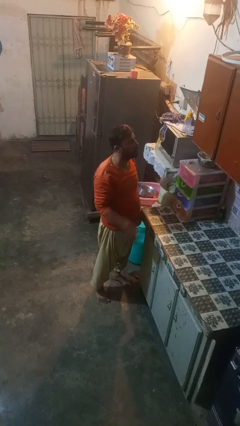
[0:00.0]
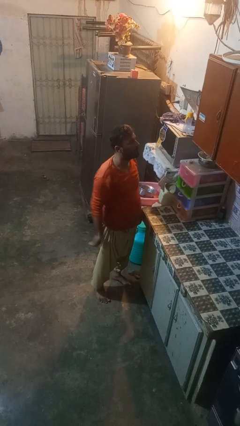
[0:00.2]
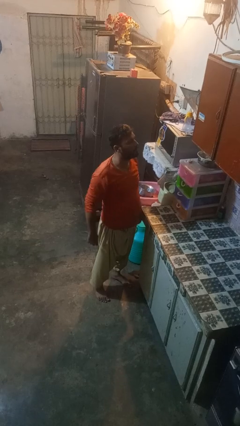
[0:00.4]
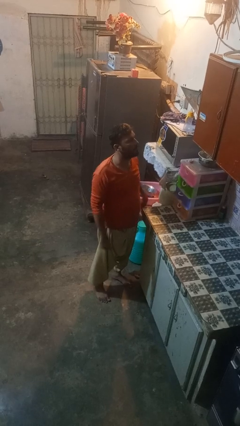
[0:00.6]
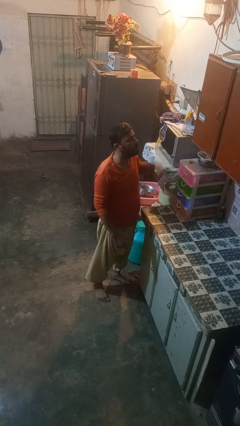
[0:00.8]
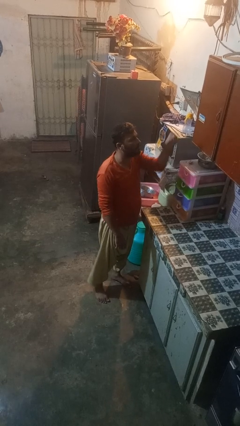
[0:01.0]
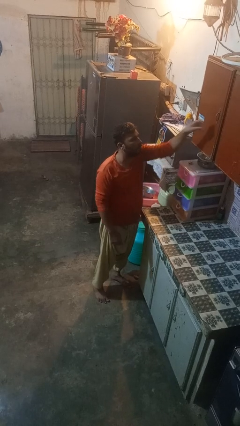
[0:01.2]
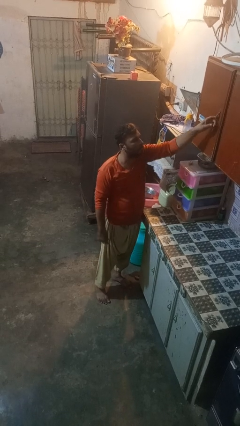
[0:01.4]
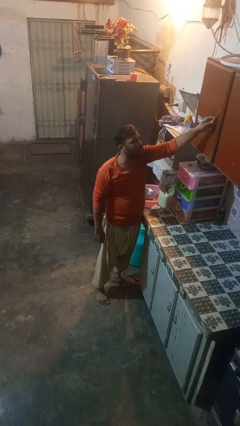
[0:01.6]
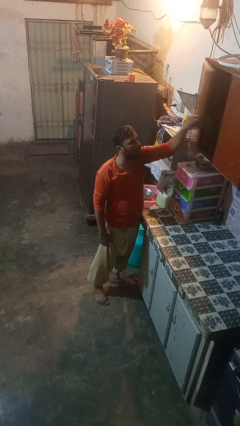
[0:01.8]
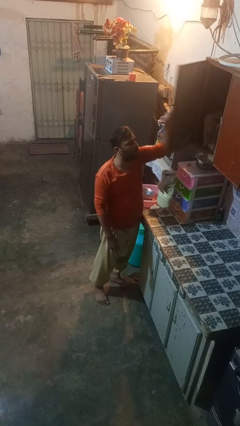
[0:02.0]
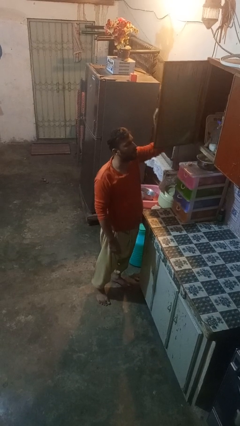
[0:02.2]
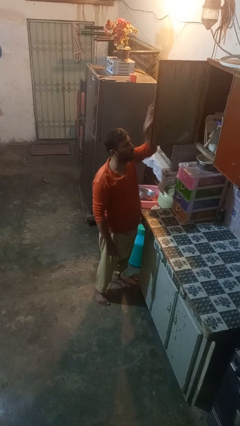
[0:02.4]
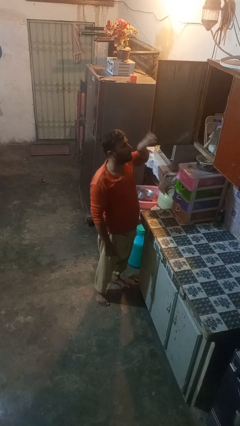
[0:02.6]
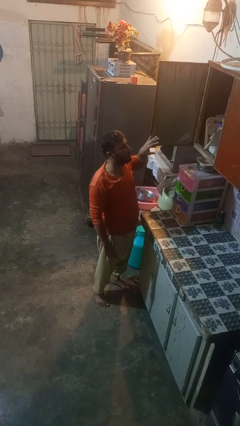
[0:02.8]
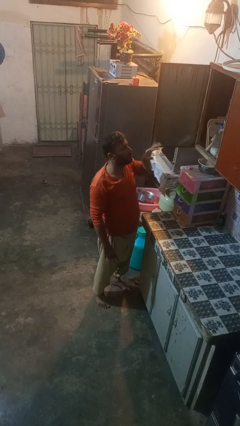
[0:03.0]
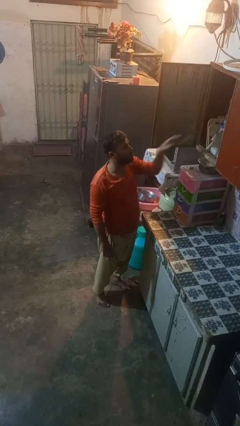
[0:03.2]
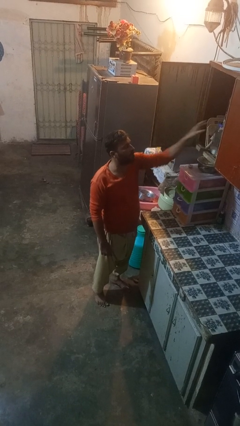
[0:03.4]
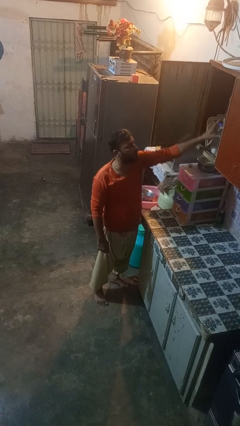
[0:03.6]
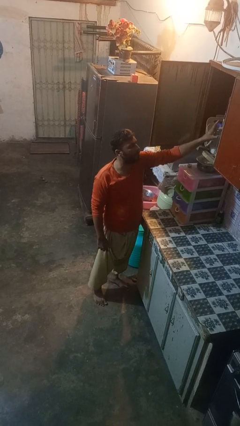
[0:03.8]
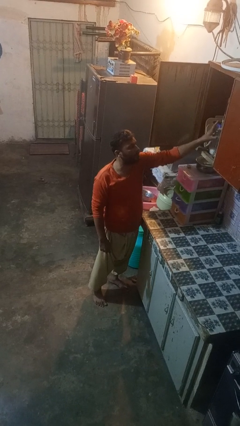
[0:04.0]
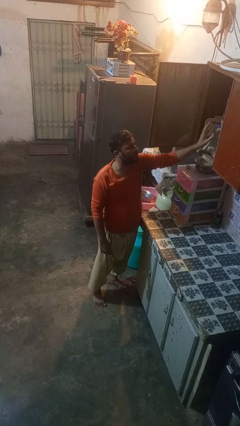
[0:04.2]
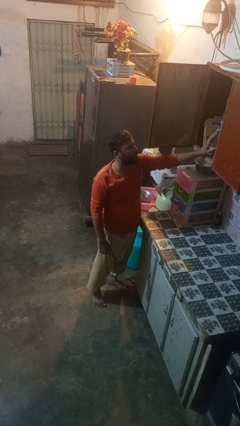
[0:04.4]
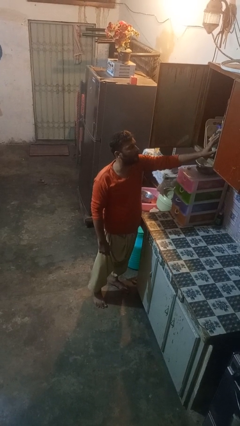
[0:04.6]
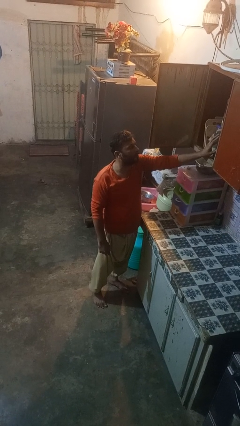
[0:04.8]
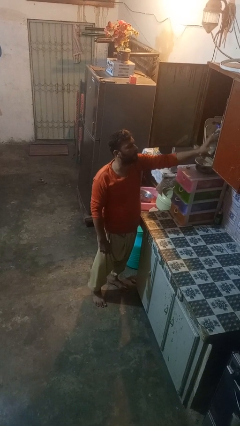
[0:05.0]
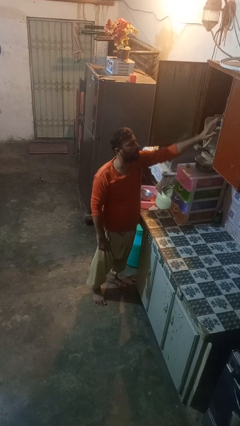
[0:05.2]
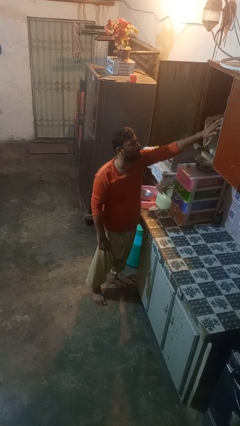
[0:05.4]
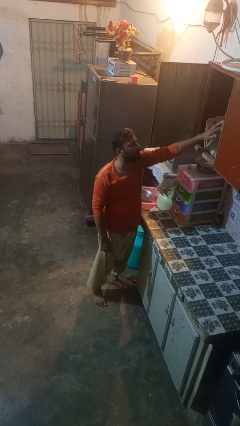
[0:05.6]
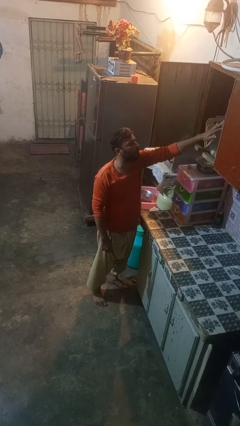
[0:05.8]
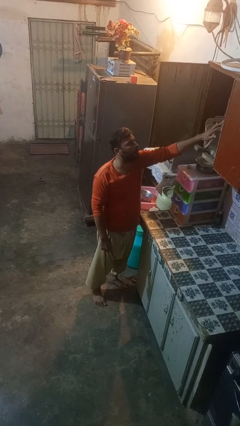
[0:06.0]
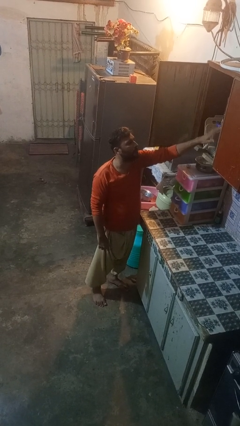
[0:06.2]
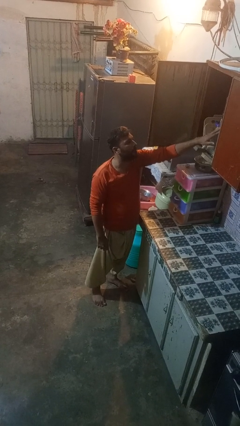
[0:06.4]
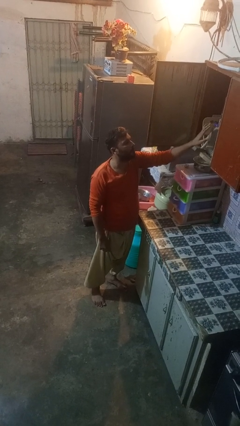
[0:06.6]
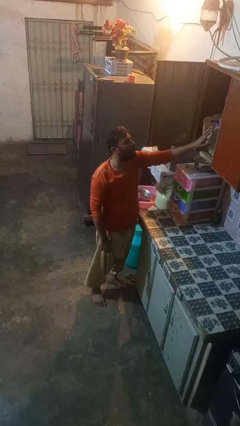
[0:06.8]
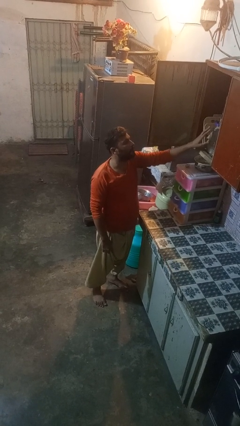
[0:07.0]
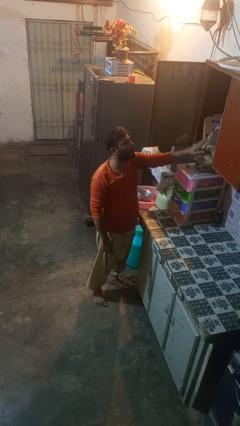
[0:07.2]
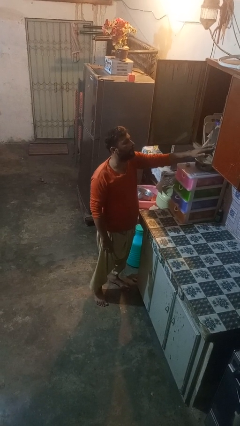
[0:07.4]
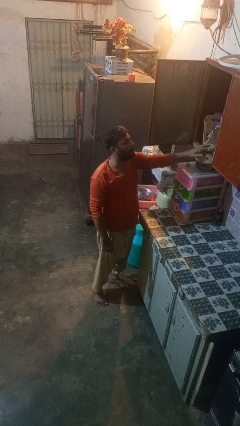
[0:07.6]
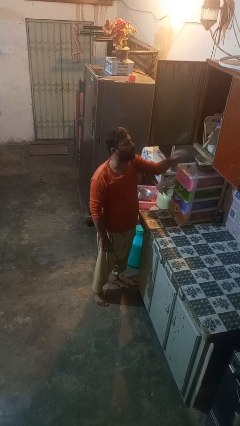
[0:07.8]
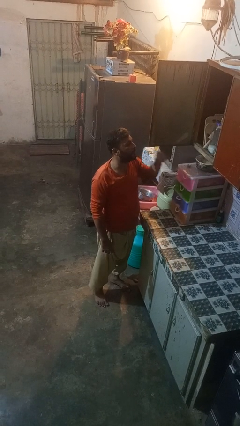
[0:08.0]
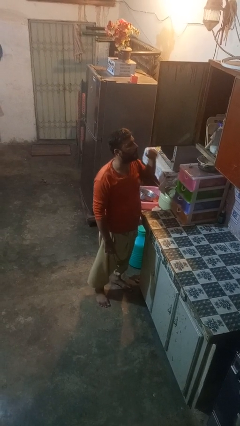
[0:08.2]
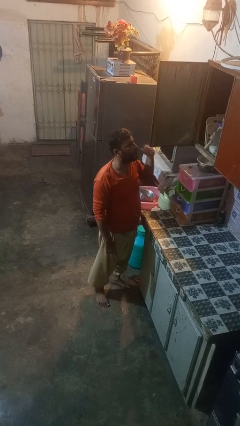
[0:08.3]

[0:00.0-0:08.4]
person opens cabinet

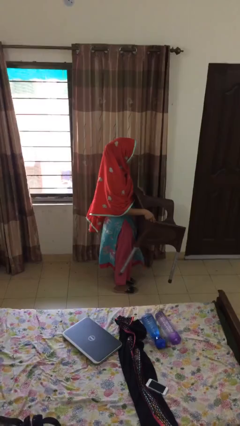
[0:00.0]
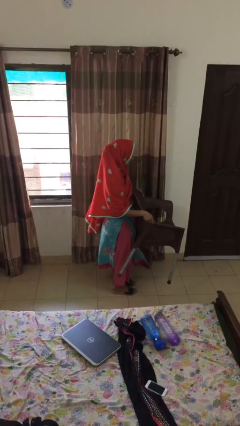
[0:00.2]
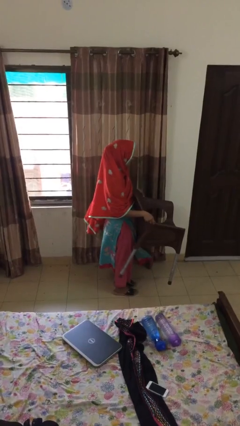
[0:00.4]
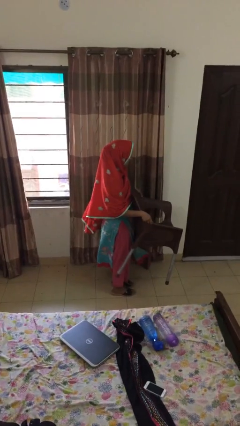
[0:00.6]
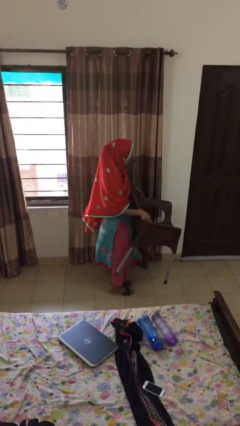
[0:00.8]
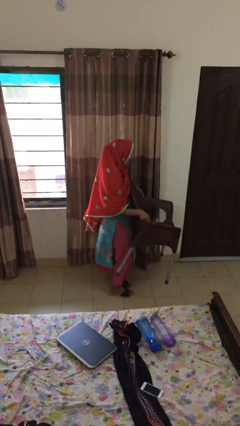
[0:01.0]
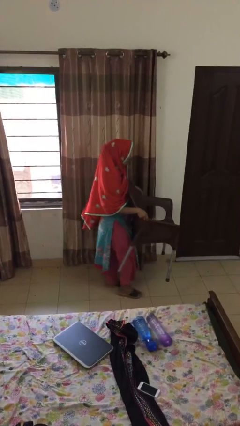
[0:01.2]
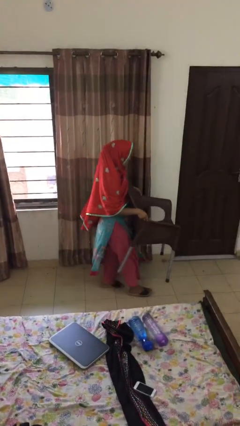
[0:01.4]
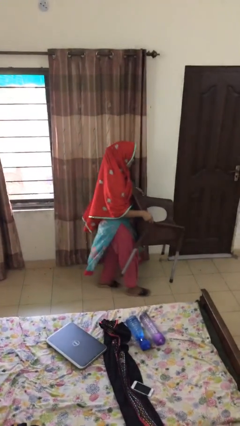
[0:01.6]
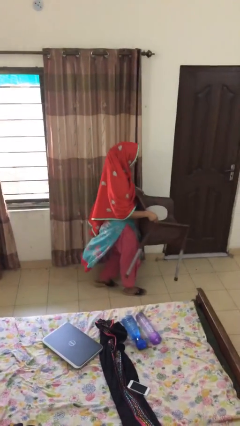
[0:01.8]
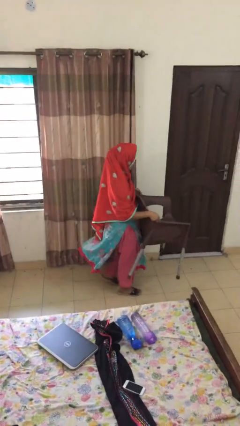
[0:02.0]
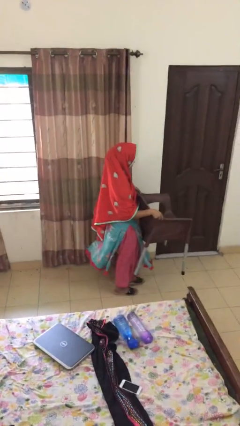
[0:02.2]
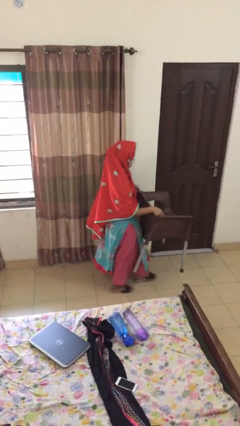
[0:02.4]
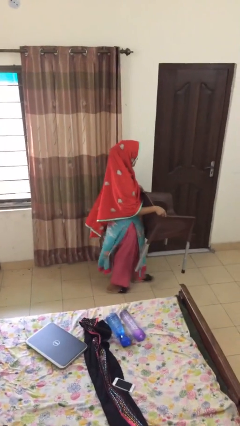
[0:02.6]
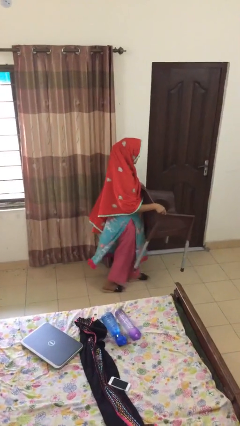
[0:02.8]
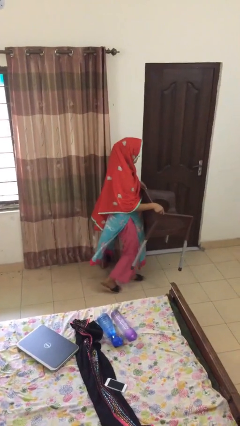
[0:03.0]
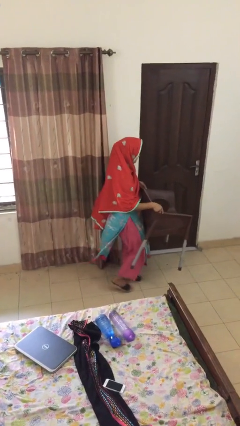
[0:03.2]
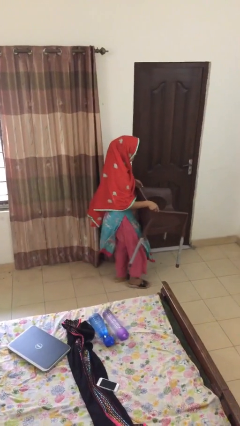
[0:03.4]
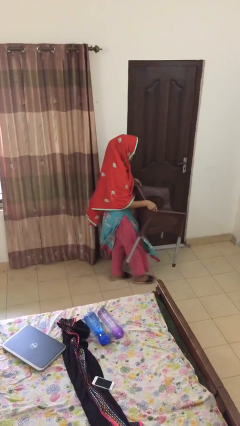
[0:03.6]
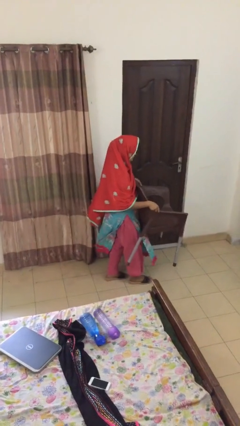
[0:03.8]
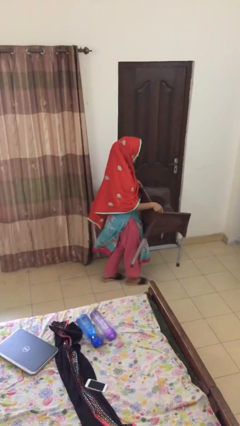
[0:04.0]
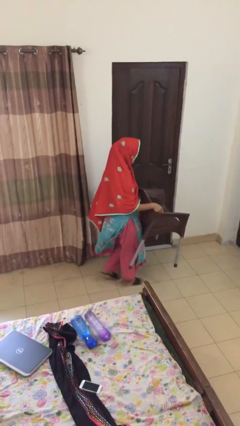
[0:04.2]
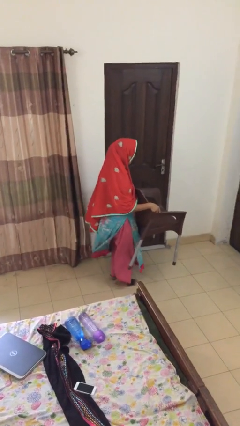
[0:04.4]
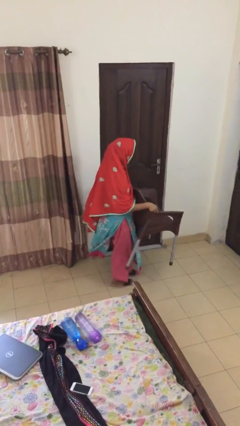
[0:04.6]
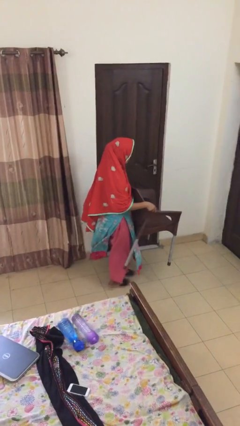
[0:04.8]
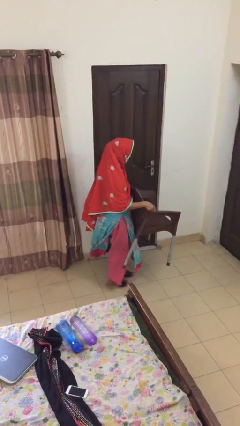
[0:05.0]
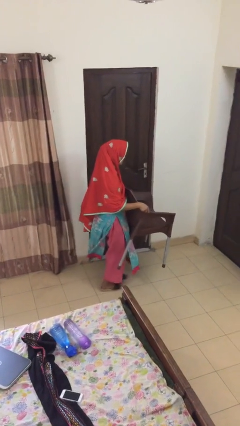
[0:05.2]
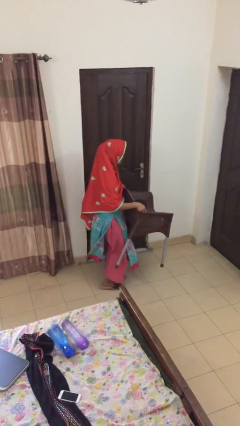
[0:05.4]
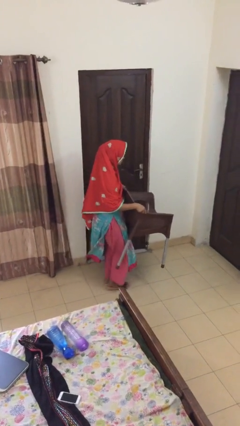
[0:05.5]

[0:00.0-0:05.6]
person carries heavy object

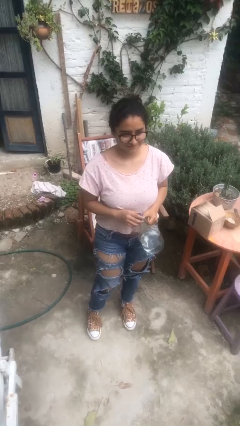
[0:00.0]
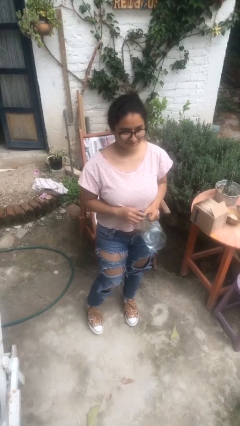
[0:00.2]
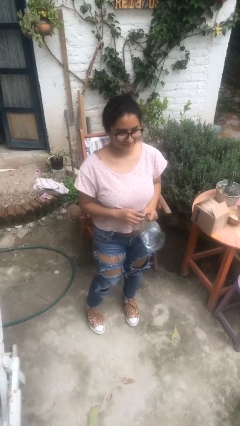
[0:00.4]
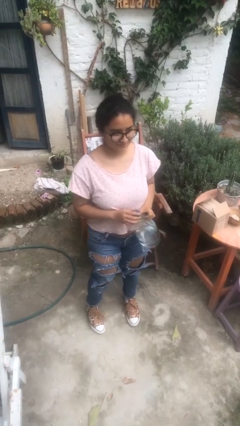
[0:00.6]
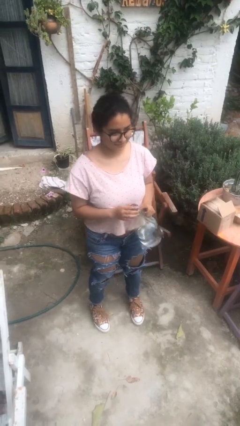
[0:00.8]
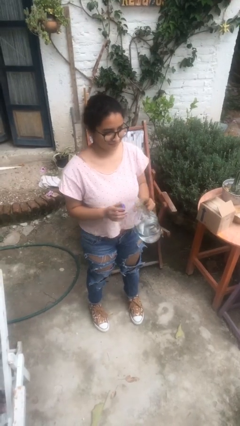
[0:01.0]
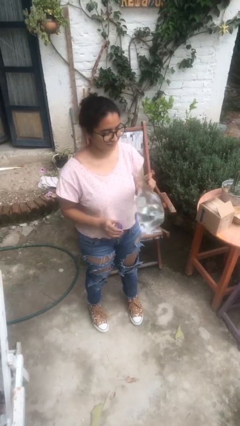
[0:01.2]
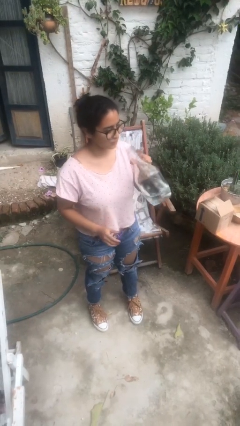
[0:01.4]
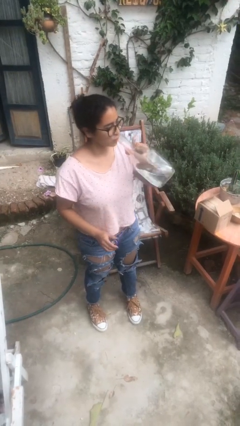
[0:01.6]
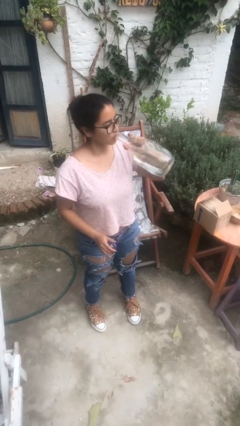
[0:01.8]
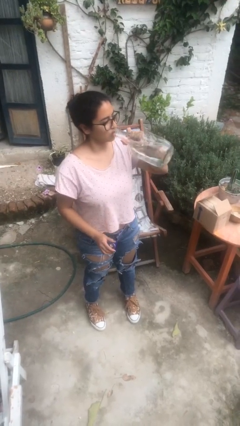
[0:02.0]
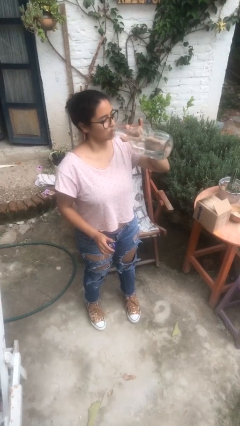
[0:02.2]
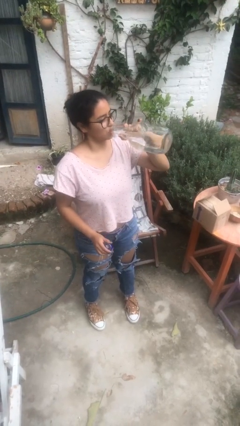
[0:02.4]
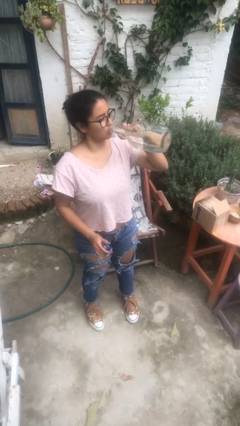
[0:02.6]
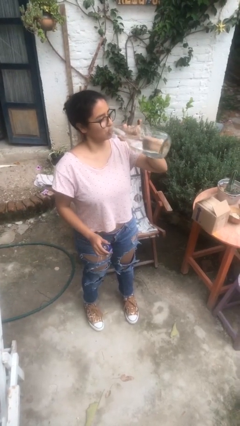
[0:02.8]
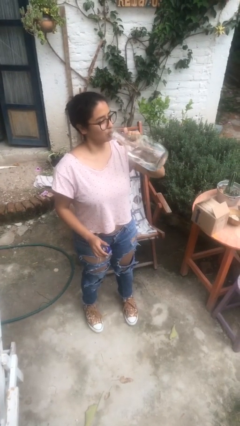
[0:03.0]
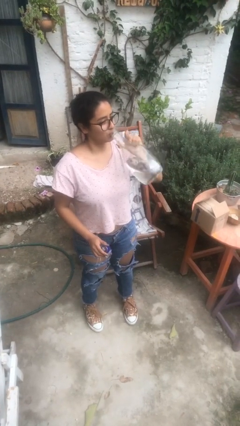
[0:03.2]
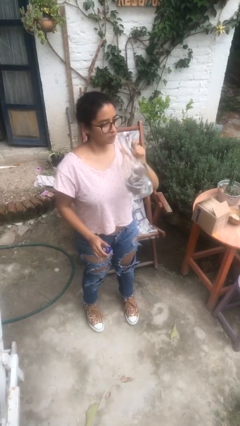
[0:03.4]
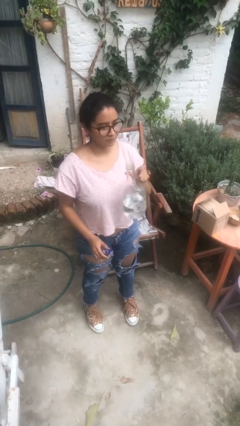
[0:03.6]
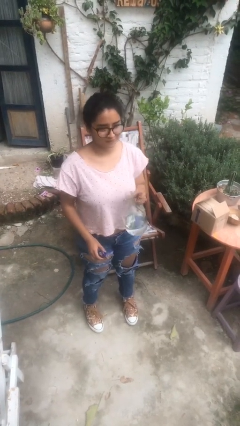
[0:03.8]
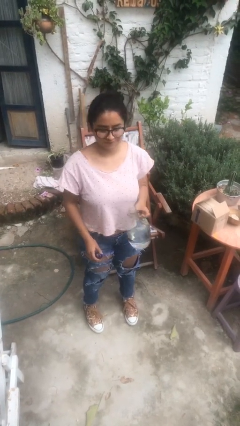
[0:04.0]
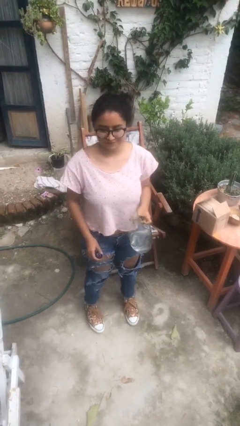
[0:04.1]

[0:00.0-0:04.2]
person drinks from bottle
